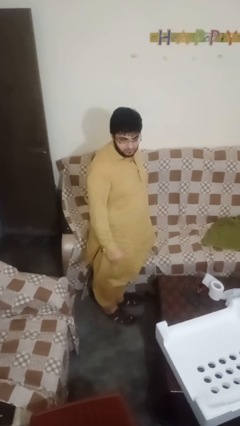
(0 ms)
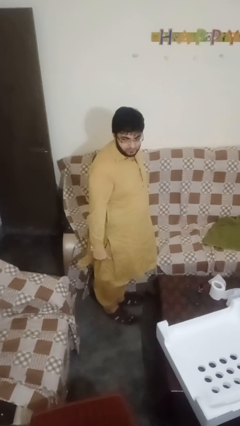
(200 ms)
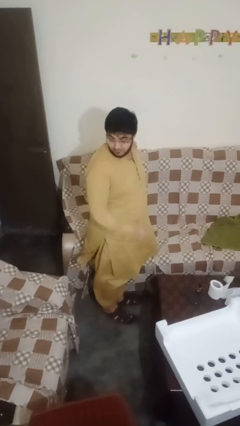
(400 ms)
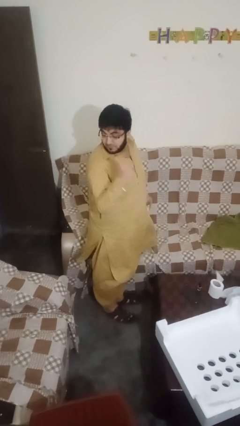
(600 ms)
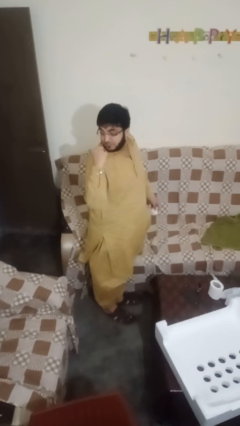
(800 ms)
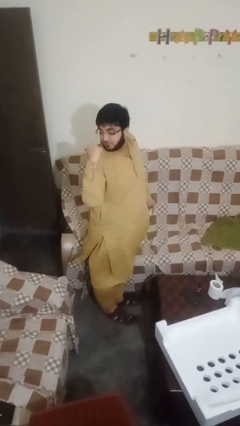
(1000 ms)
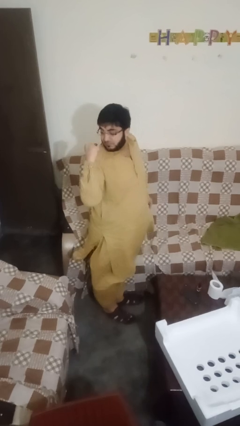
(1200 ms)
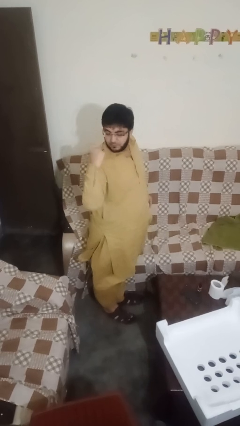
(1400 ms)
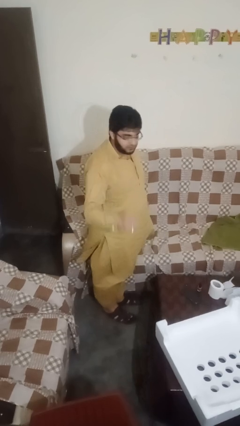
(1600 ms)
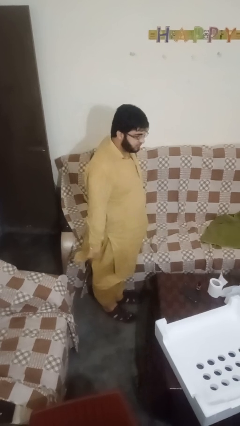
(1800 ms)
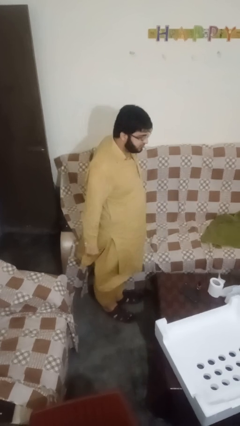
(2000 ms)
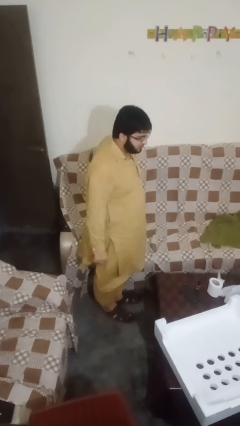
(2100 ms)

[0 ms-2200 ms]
person gestures behind me

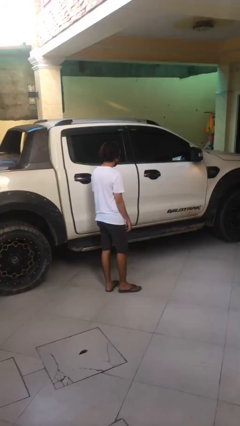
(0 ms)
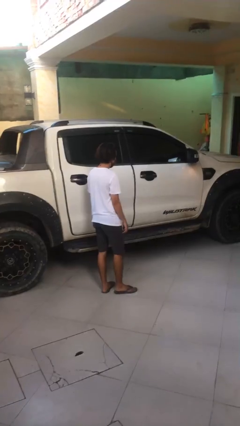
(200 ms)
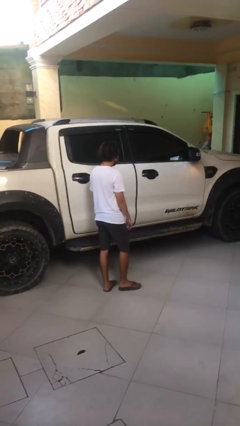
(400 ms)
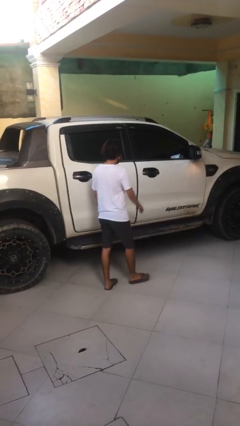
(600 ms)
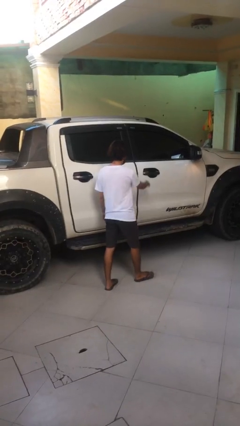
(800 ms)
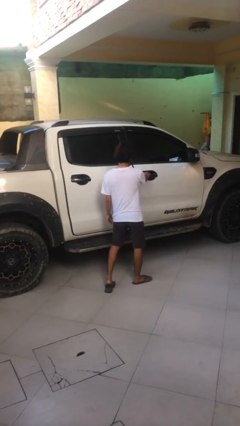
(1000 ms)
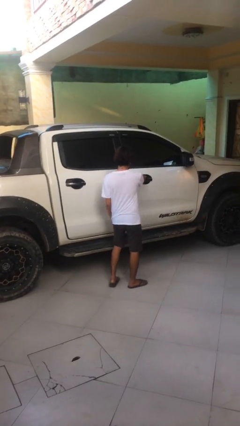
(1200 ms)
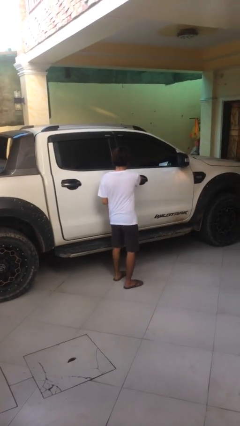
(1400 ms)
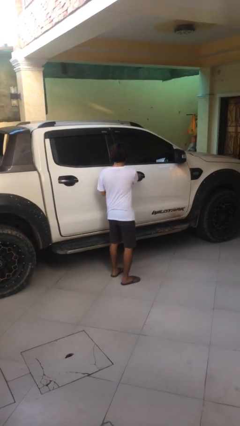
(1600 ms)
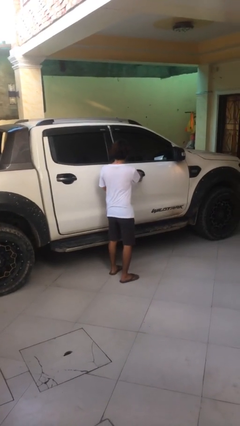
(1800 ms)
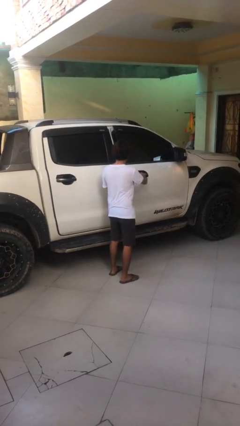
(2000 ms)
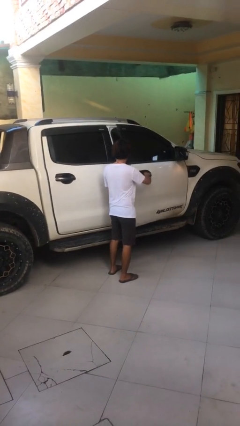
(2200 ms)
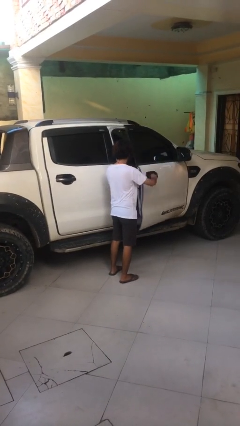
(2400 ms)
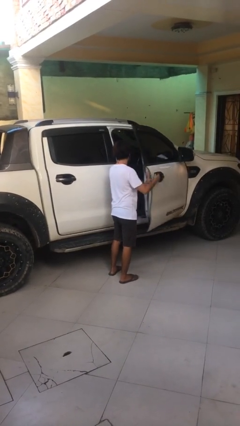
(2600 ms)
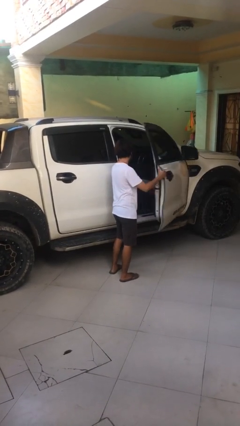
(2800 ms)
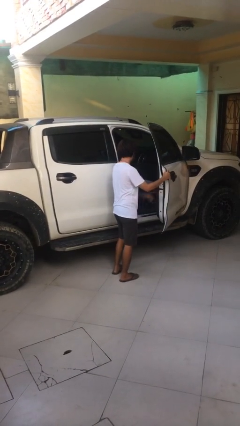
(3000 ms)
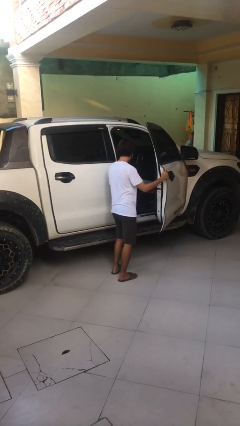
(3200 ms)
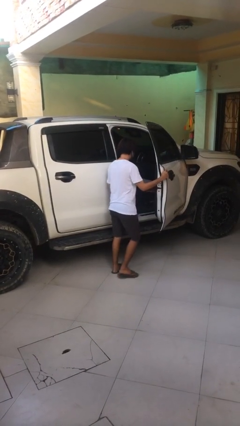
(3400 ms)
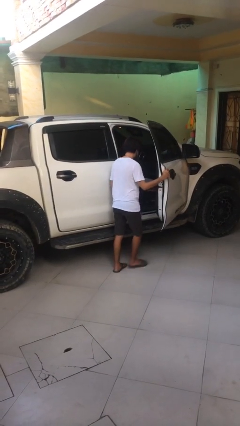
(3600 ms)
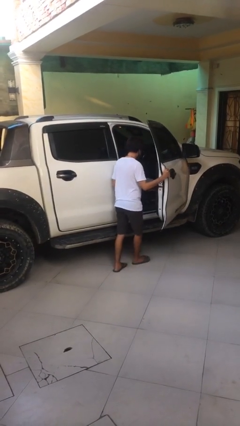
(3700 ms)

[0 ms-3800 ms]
person opens car door

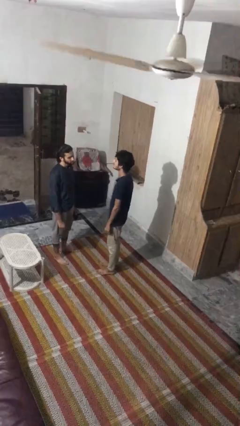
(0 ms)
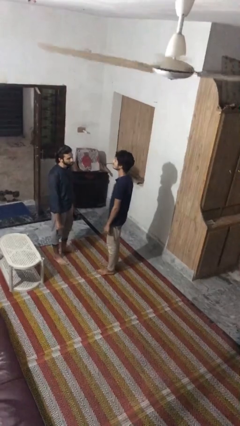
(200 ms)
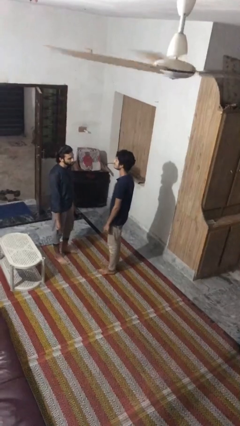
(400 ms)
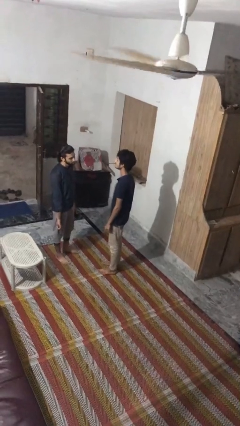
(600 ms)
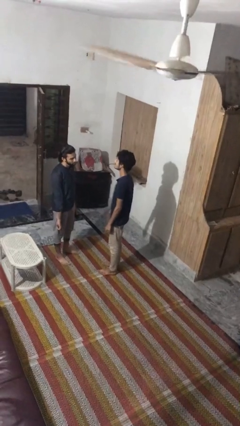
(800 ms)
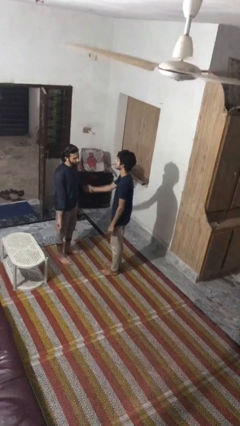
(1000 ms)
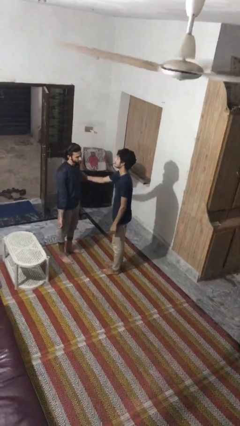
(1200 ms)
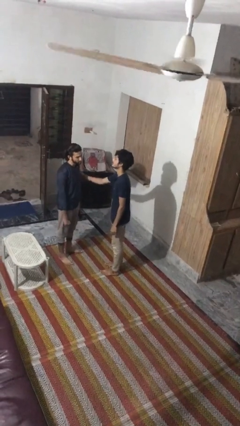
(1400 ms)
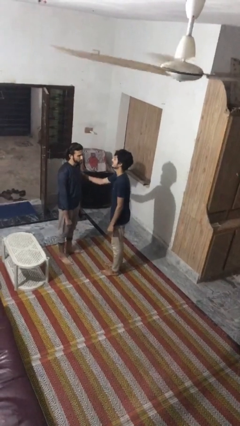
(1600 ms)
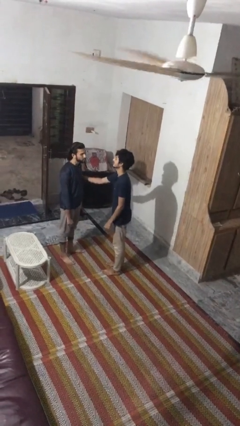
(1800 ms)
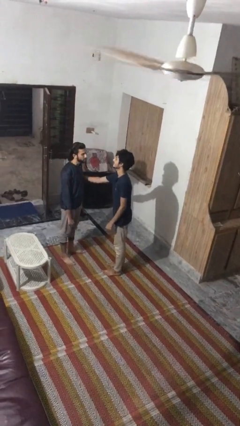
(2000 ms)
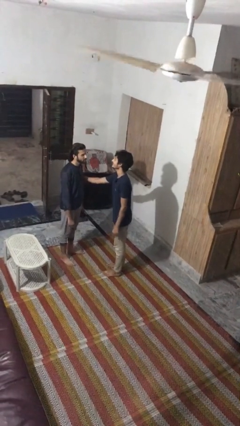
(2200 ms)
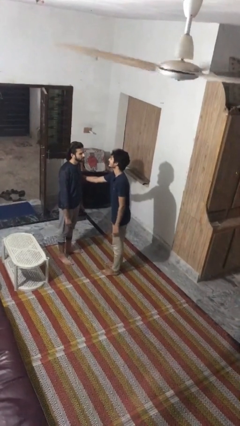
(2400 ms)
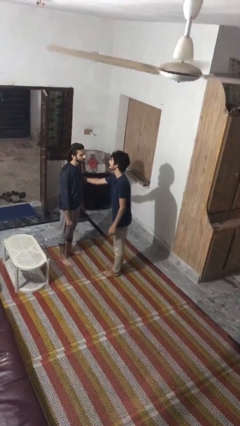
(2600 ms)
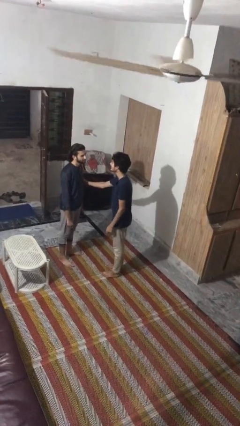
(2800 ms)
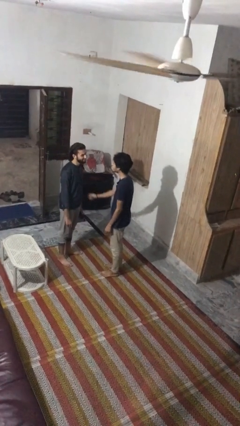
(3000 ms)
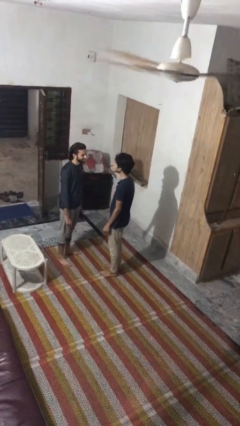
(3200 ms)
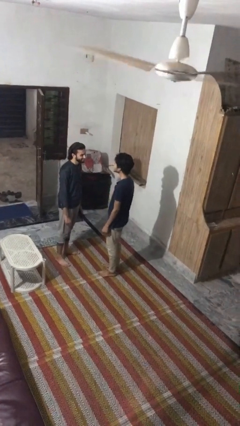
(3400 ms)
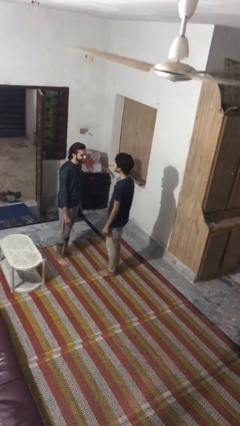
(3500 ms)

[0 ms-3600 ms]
person grabs person by bicep

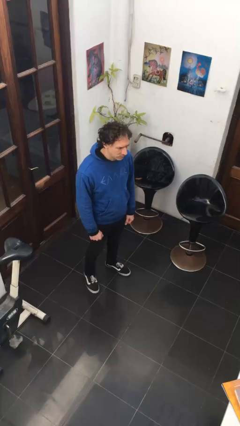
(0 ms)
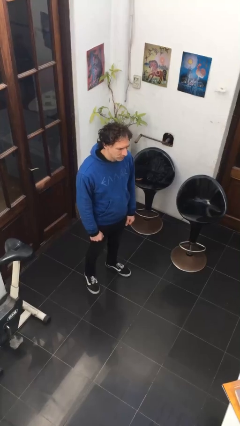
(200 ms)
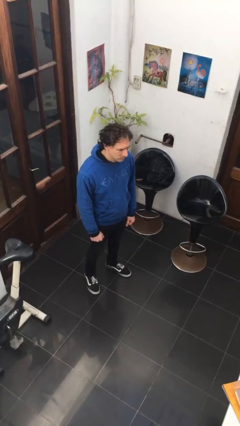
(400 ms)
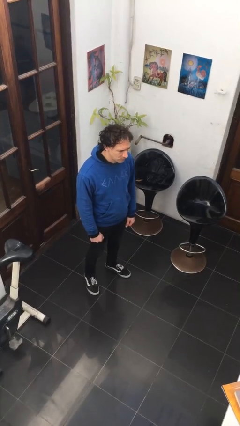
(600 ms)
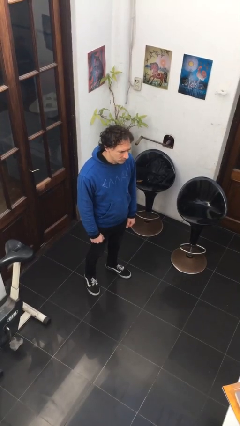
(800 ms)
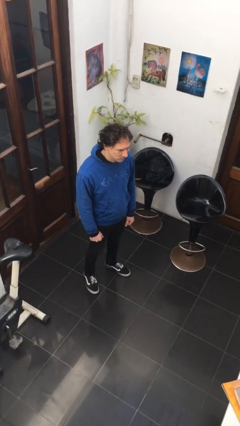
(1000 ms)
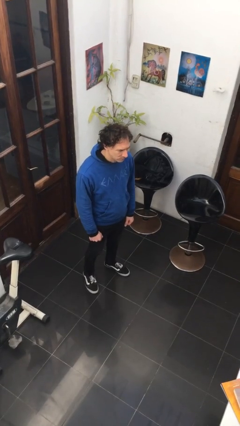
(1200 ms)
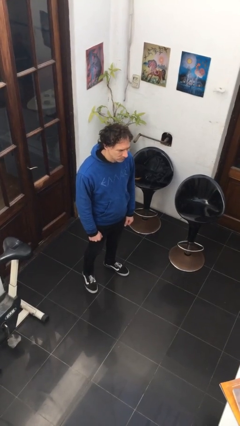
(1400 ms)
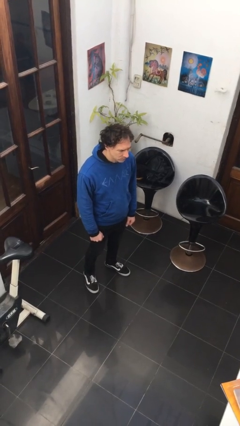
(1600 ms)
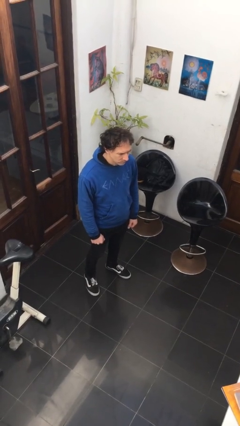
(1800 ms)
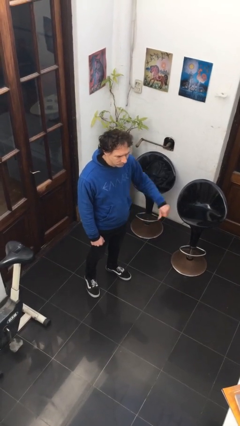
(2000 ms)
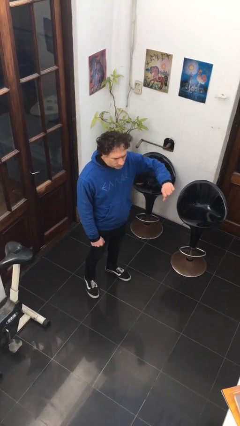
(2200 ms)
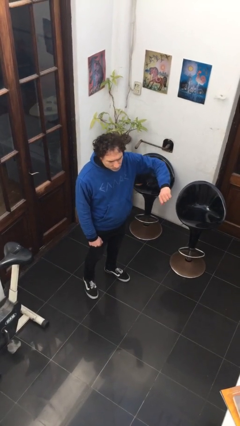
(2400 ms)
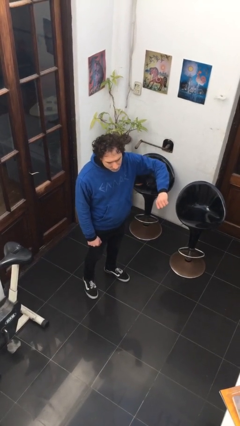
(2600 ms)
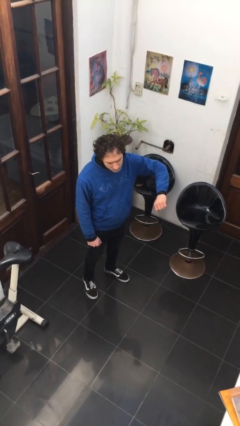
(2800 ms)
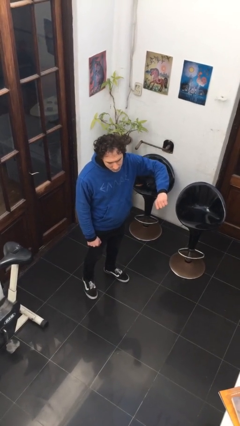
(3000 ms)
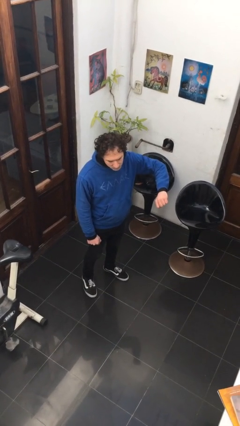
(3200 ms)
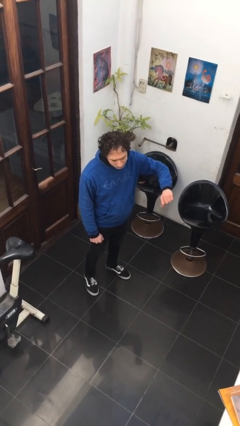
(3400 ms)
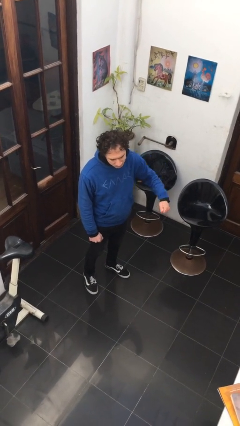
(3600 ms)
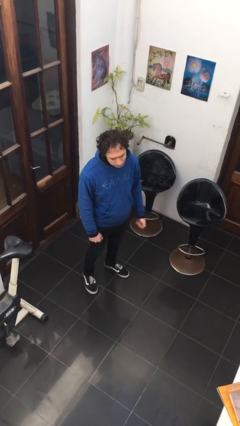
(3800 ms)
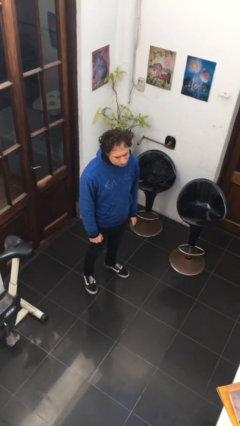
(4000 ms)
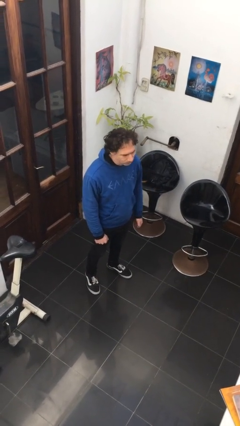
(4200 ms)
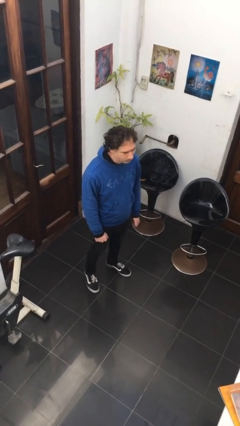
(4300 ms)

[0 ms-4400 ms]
person gestures thumbs down

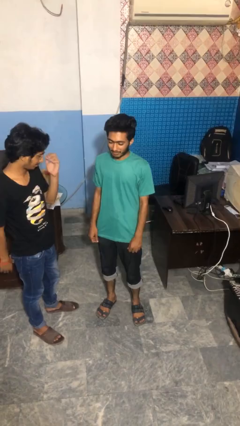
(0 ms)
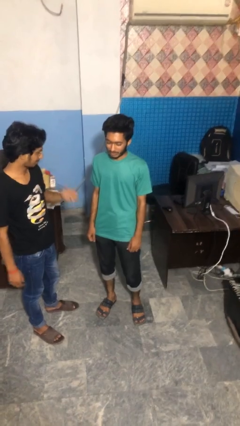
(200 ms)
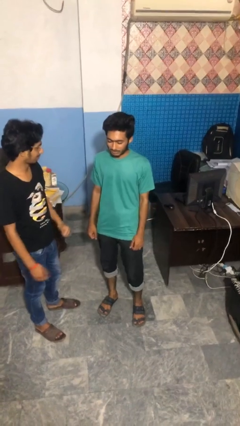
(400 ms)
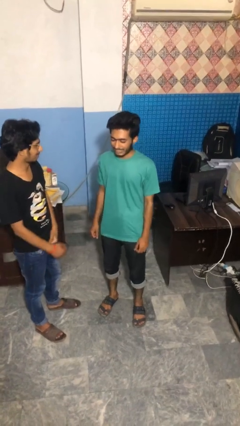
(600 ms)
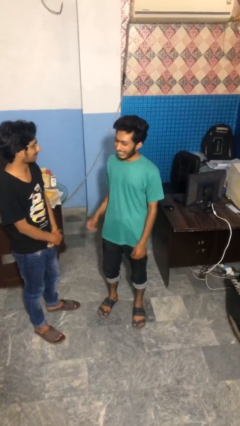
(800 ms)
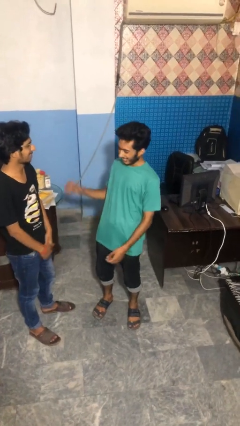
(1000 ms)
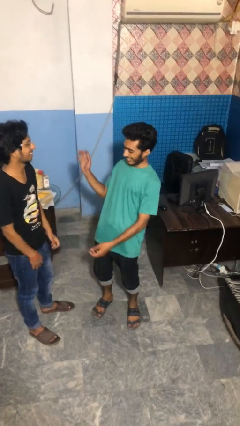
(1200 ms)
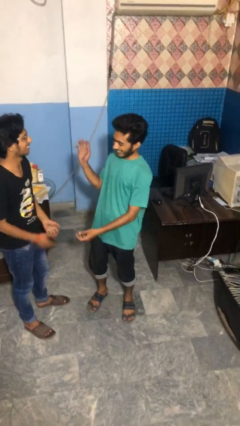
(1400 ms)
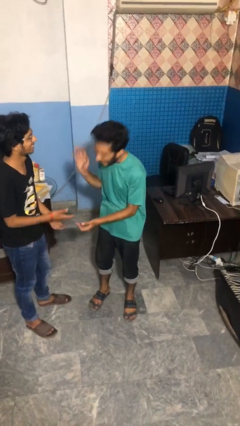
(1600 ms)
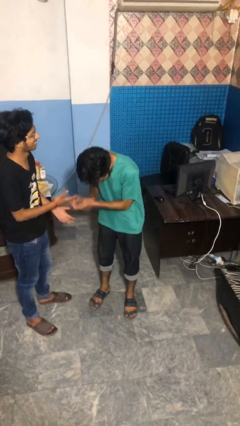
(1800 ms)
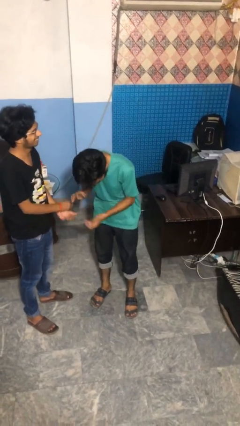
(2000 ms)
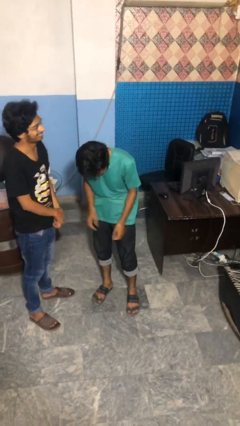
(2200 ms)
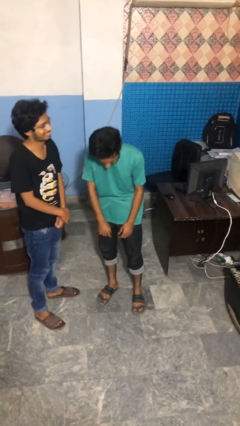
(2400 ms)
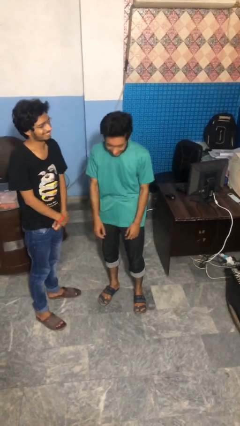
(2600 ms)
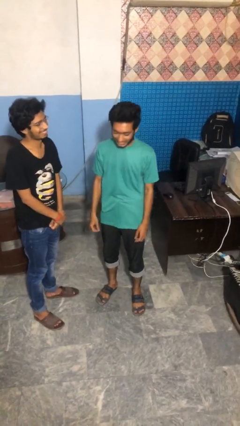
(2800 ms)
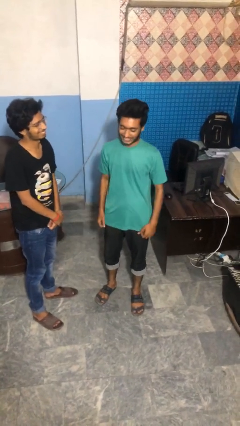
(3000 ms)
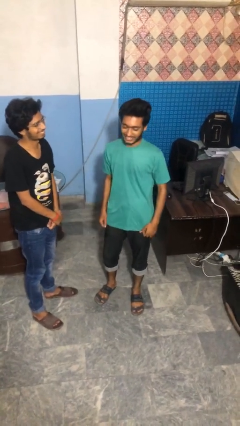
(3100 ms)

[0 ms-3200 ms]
person laughs with person

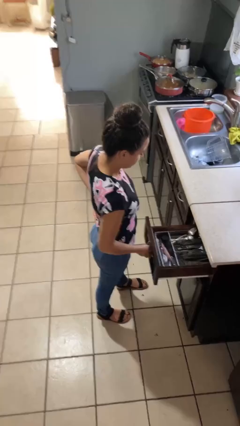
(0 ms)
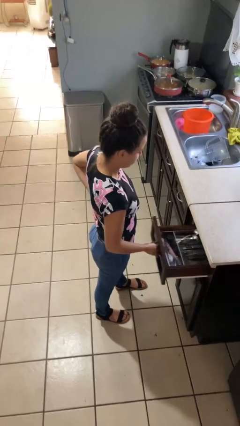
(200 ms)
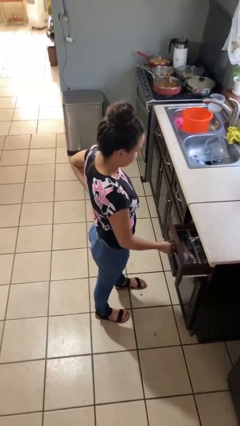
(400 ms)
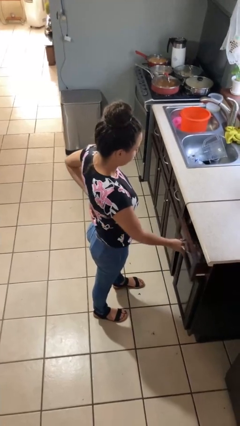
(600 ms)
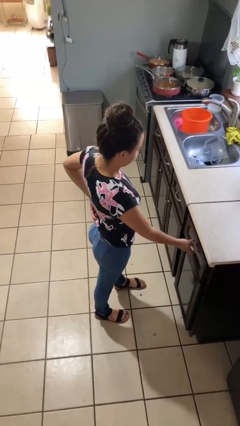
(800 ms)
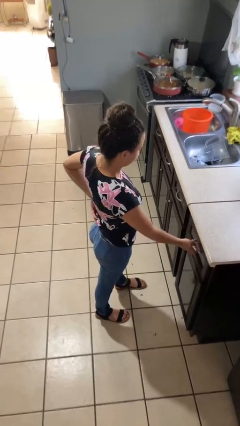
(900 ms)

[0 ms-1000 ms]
person closes kitchen drawer
